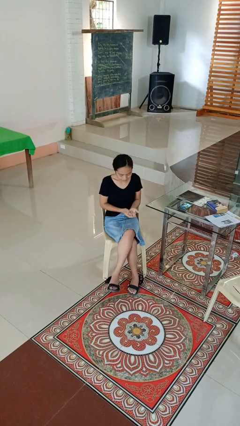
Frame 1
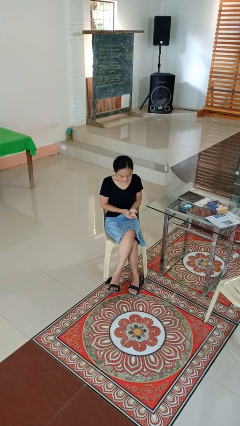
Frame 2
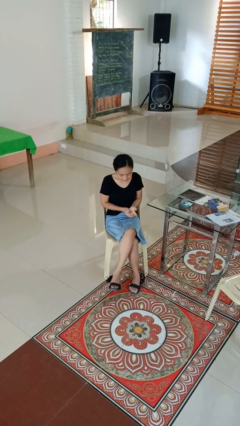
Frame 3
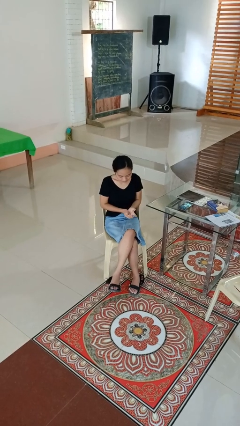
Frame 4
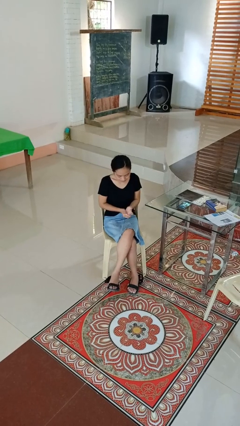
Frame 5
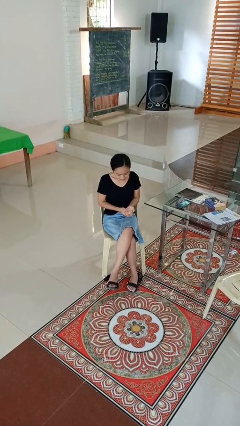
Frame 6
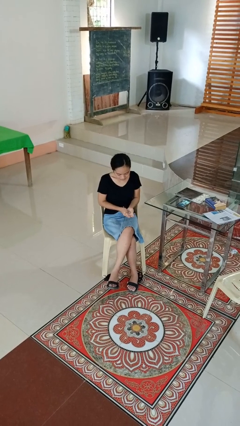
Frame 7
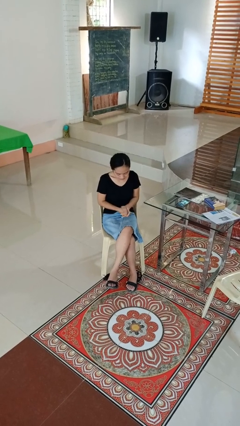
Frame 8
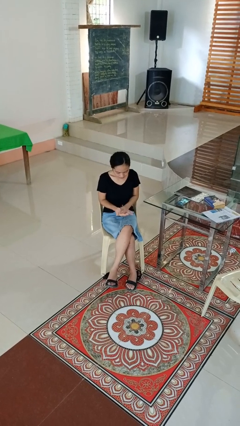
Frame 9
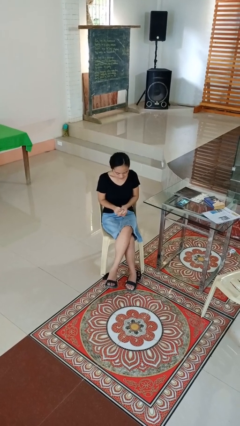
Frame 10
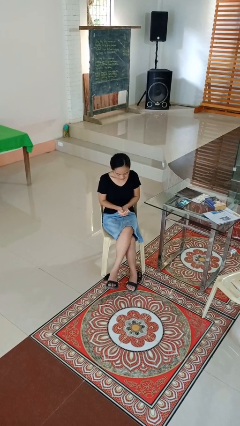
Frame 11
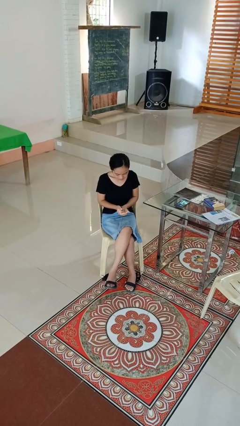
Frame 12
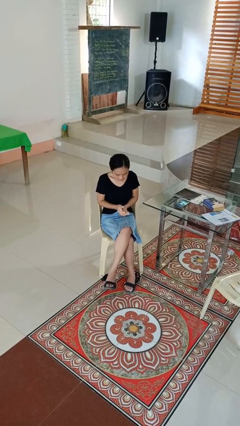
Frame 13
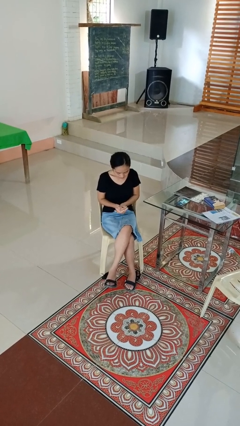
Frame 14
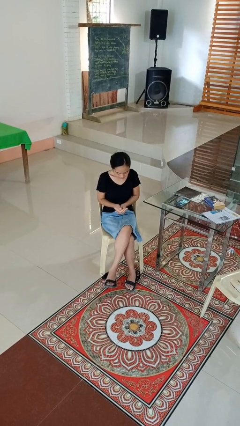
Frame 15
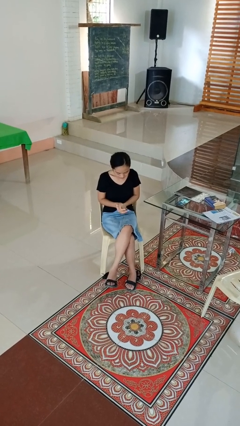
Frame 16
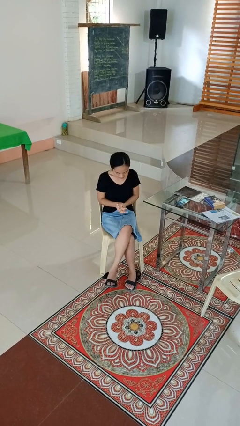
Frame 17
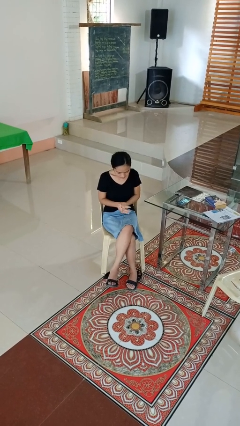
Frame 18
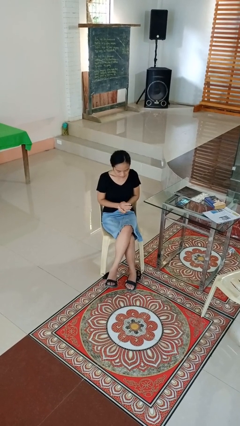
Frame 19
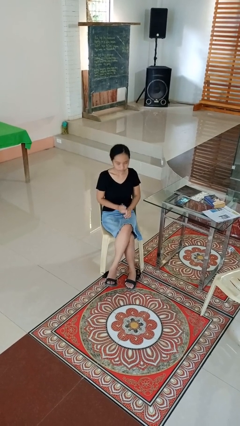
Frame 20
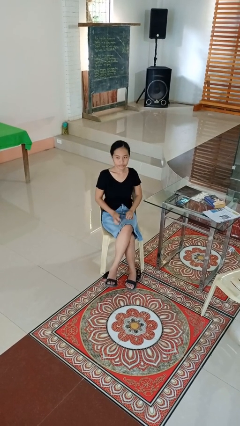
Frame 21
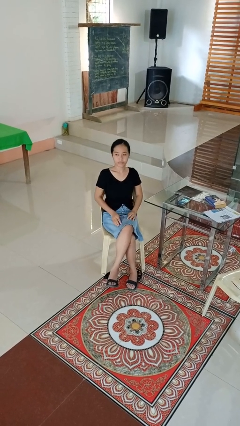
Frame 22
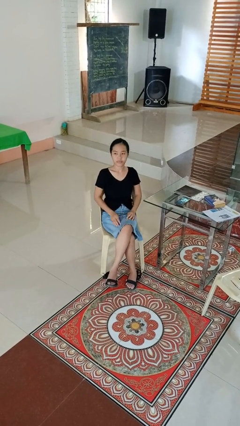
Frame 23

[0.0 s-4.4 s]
person looks at hands in lap

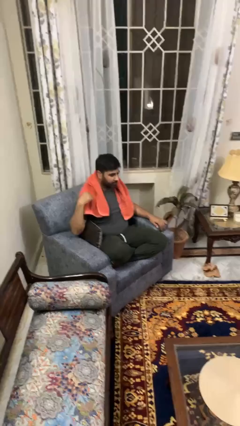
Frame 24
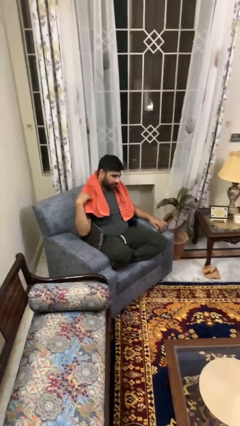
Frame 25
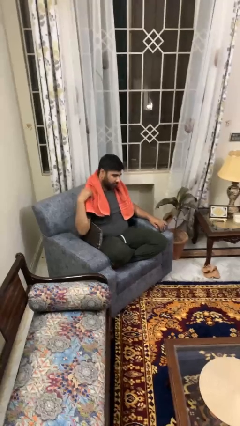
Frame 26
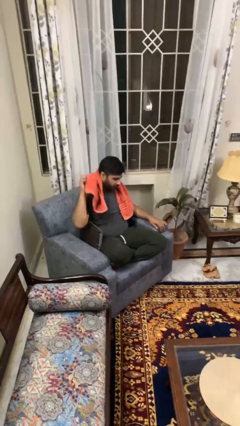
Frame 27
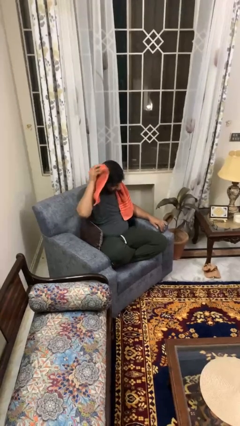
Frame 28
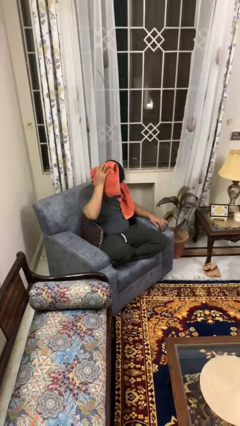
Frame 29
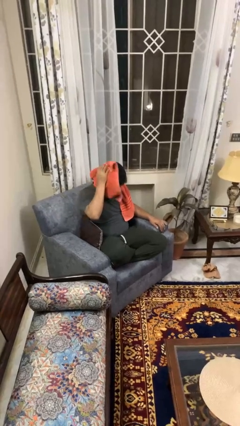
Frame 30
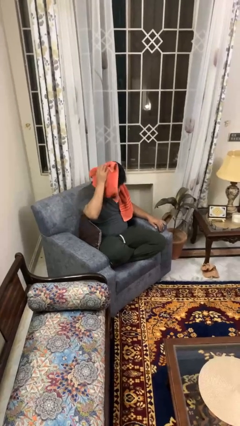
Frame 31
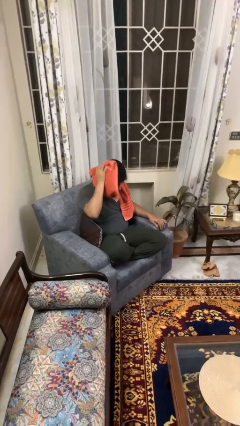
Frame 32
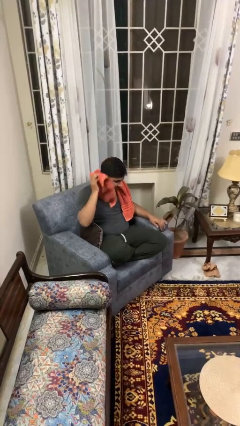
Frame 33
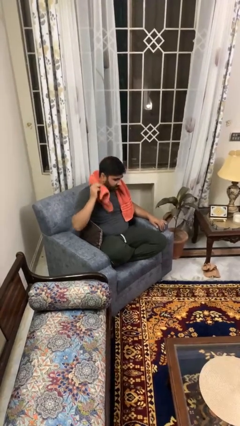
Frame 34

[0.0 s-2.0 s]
person dries hair with towel

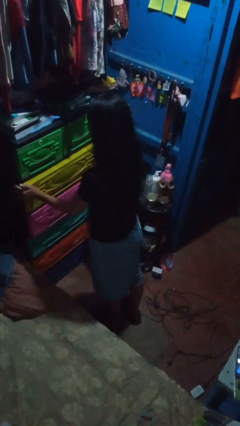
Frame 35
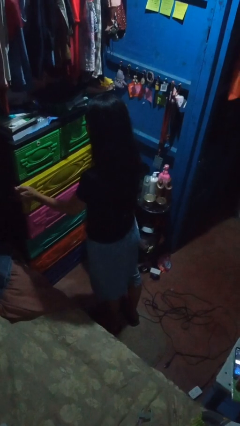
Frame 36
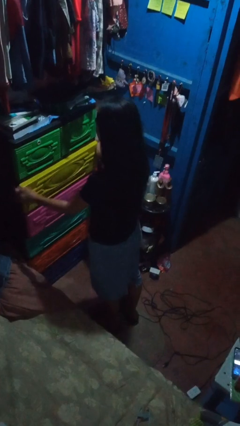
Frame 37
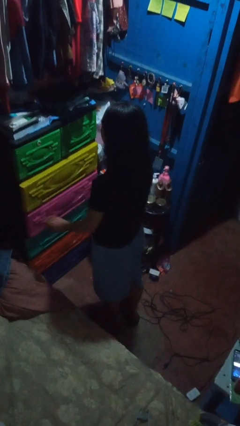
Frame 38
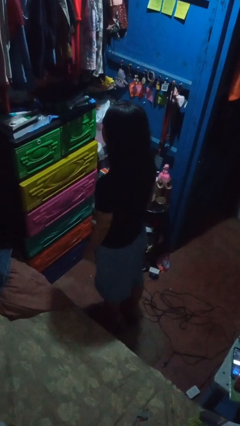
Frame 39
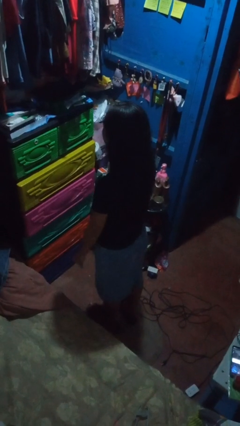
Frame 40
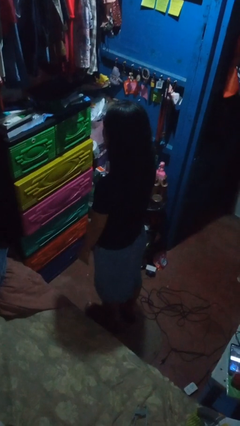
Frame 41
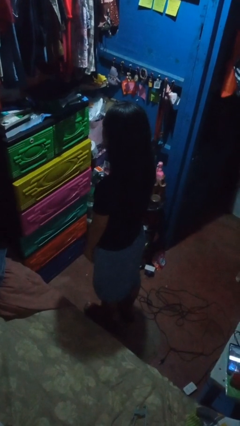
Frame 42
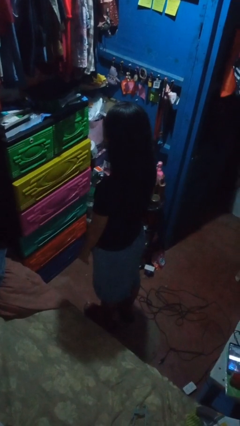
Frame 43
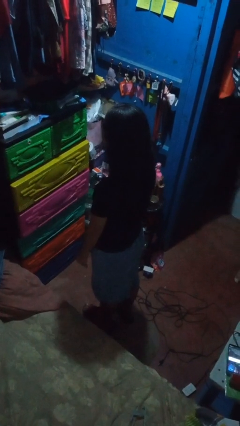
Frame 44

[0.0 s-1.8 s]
person closes dresser drawer

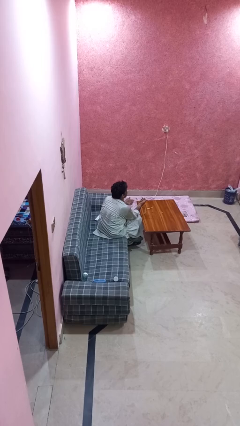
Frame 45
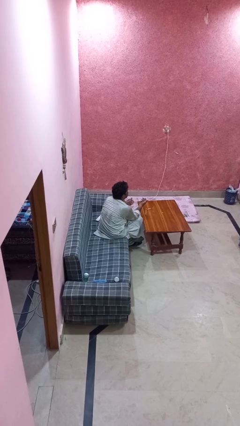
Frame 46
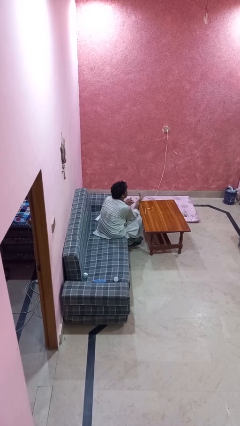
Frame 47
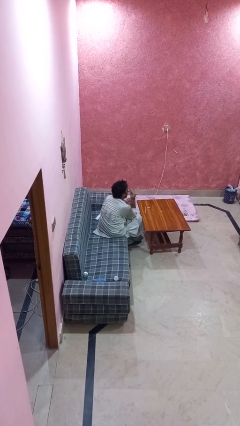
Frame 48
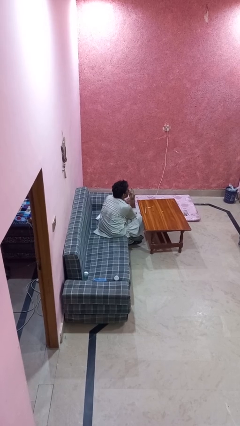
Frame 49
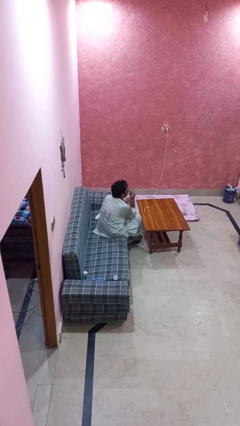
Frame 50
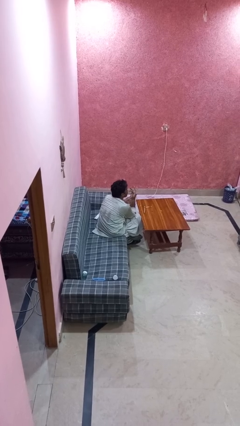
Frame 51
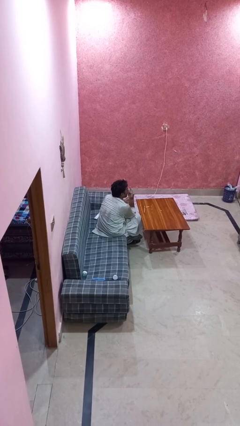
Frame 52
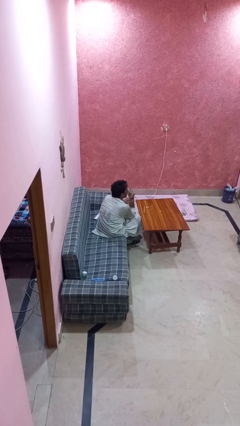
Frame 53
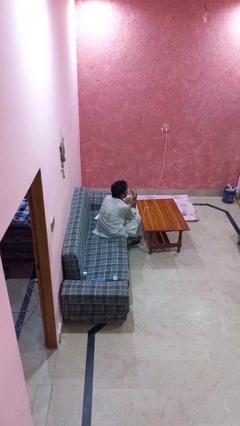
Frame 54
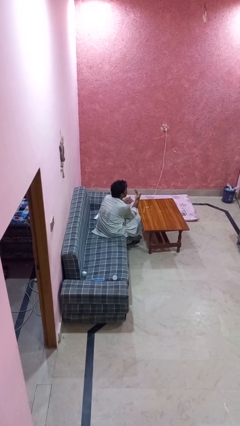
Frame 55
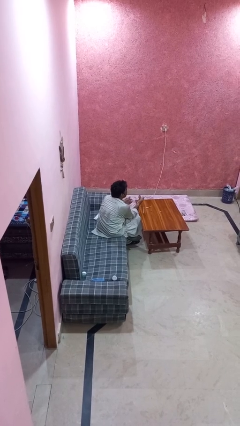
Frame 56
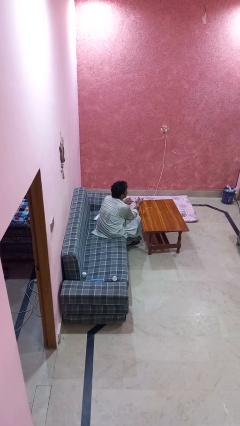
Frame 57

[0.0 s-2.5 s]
person licks fingers

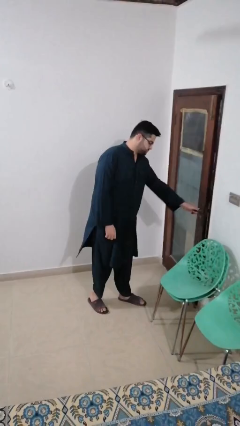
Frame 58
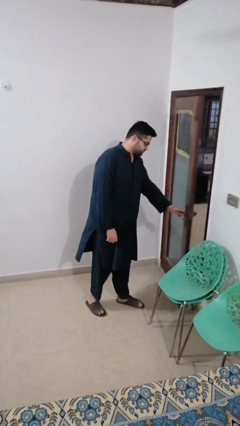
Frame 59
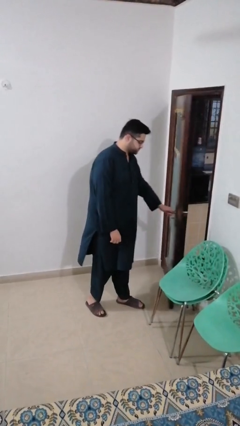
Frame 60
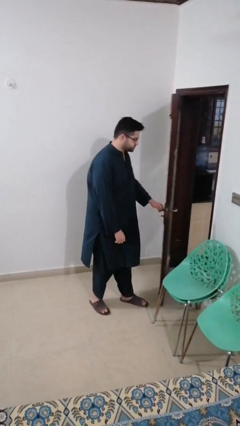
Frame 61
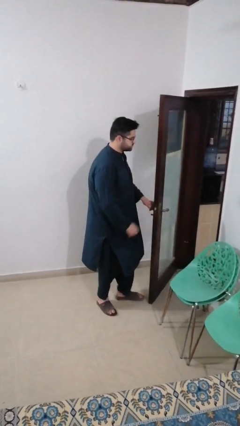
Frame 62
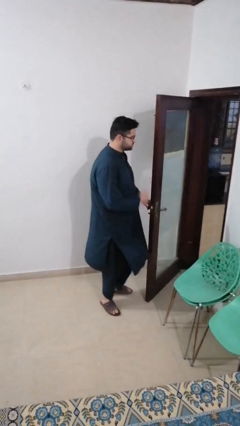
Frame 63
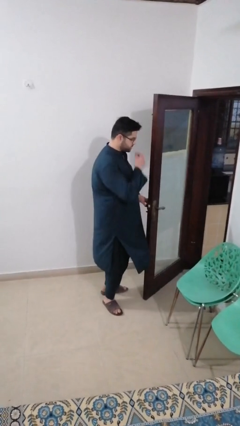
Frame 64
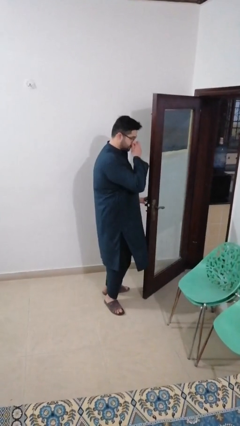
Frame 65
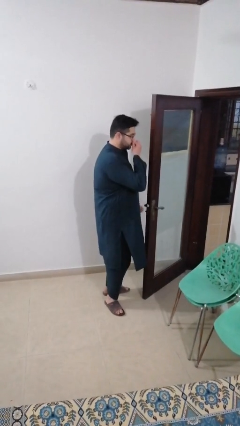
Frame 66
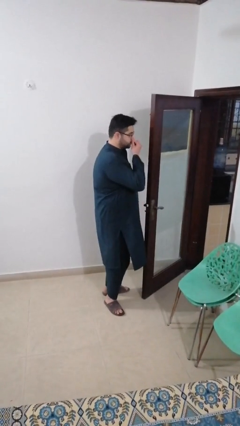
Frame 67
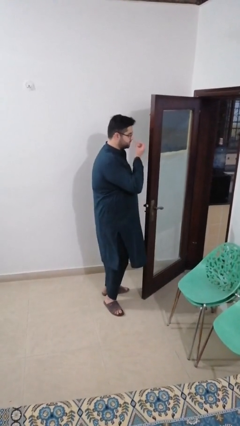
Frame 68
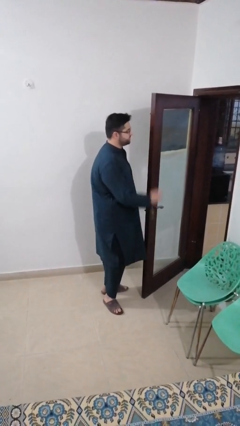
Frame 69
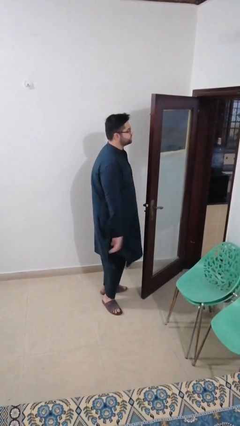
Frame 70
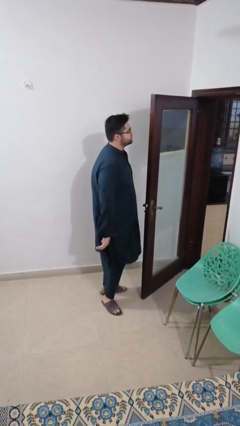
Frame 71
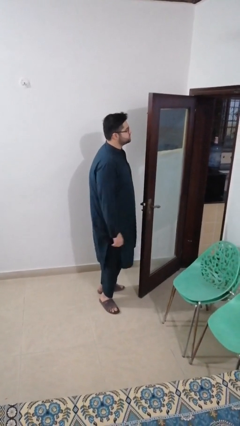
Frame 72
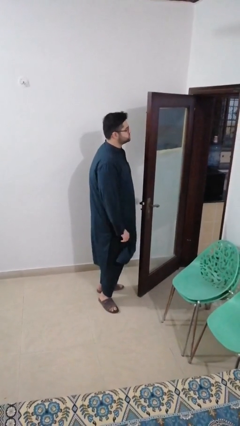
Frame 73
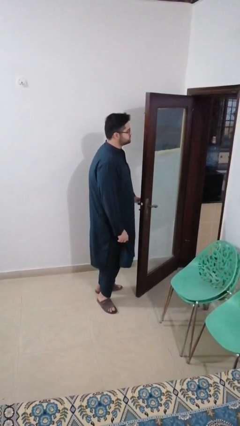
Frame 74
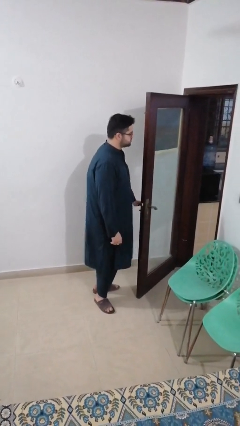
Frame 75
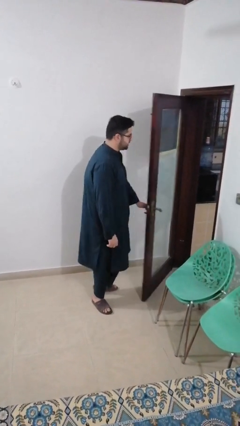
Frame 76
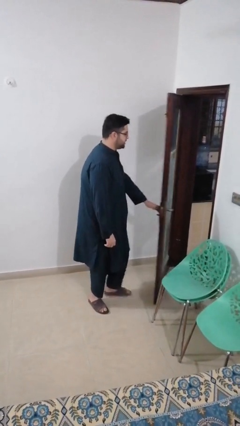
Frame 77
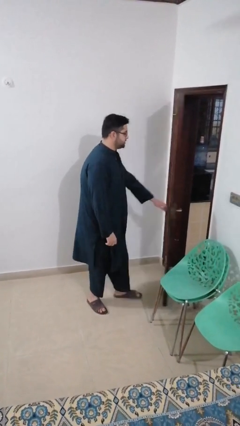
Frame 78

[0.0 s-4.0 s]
person opens facility door

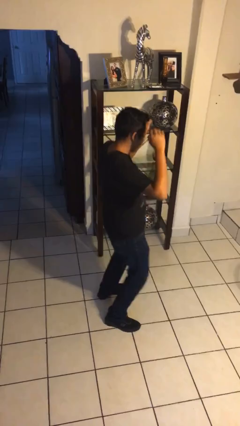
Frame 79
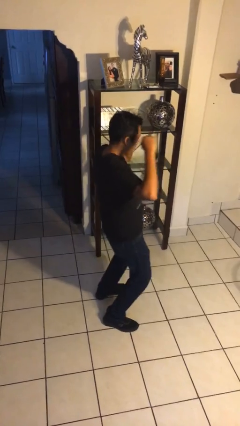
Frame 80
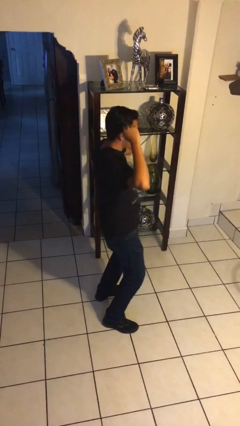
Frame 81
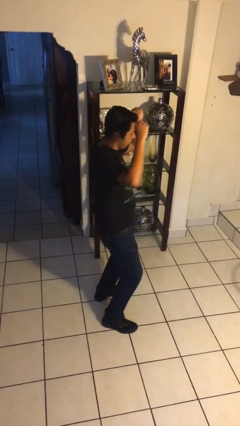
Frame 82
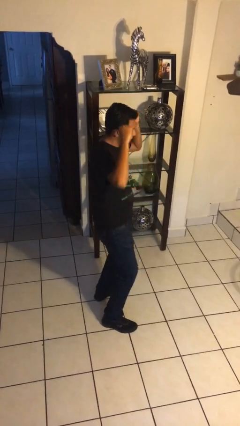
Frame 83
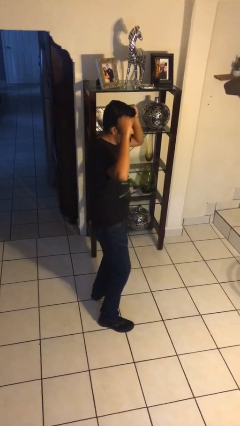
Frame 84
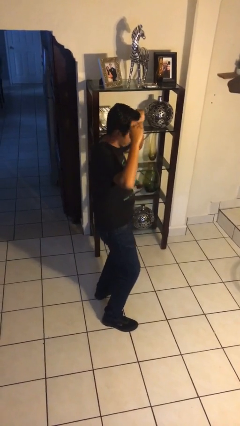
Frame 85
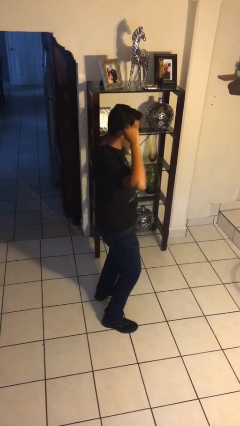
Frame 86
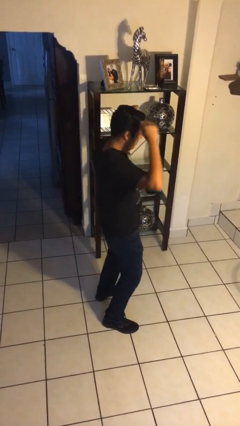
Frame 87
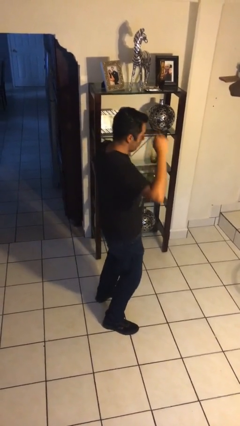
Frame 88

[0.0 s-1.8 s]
person dances in place

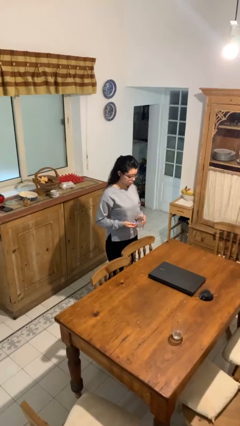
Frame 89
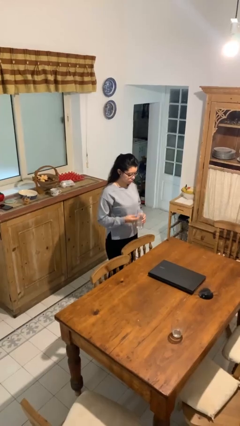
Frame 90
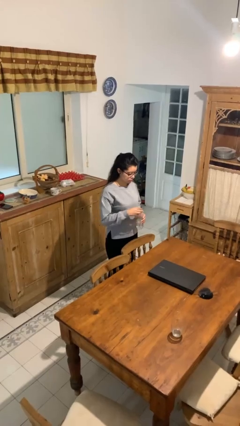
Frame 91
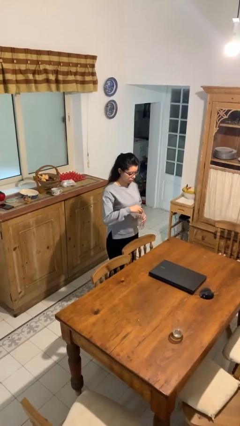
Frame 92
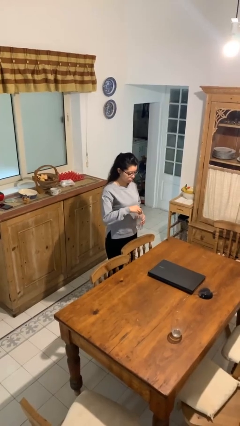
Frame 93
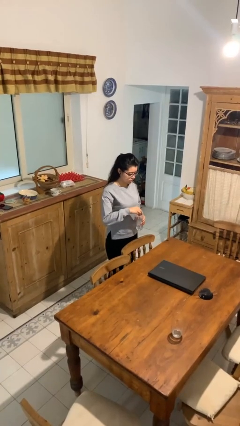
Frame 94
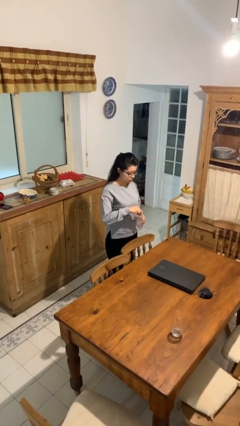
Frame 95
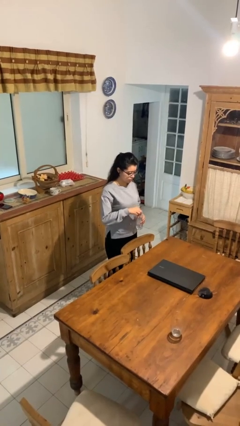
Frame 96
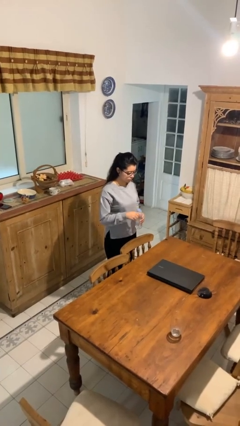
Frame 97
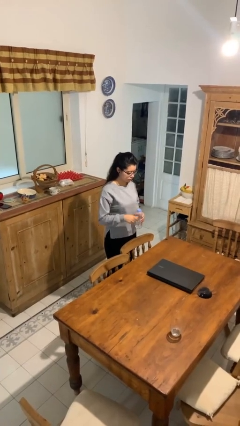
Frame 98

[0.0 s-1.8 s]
person screws lid to bottle
